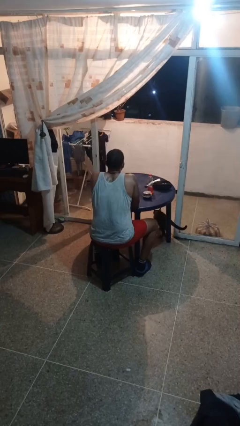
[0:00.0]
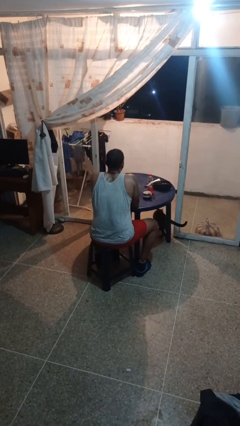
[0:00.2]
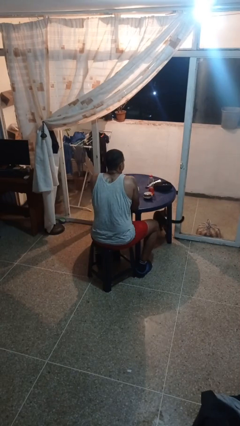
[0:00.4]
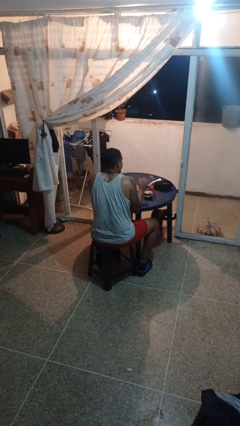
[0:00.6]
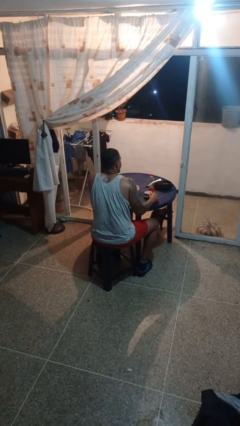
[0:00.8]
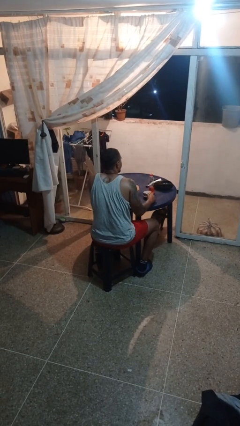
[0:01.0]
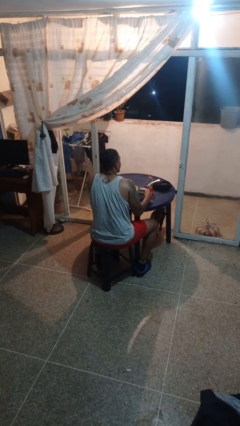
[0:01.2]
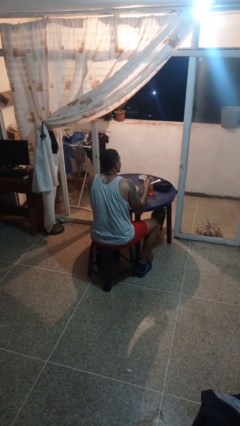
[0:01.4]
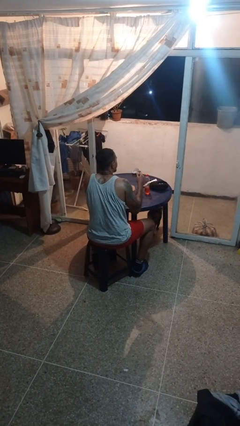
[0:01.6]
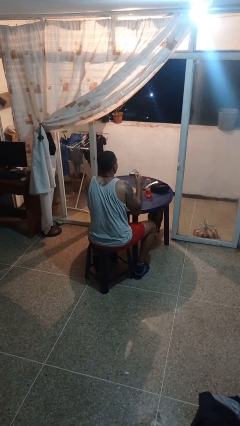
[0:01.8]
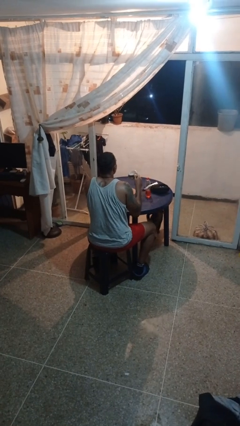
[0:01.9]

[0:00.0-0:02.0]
person picks up object from table

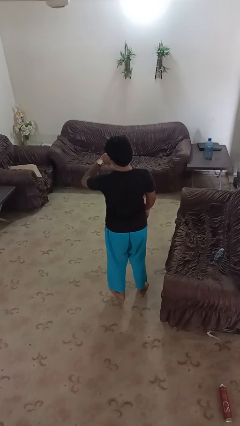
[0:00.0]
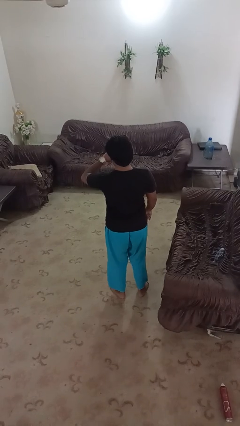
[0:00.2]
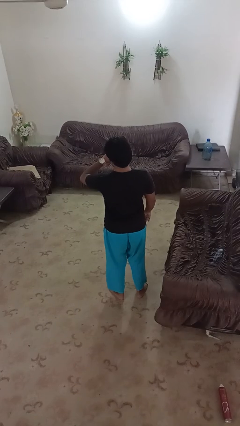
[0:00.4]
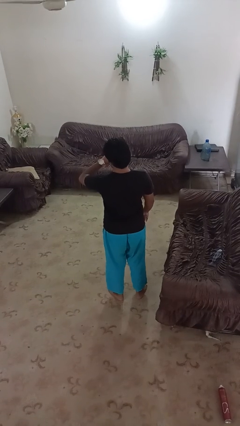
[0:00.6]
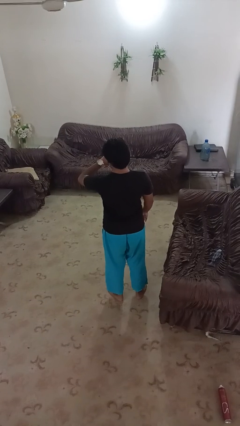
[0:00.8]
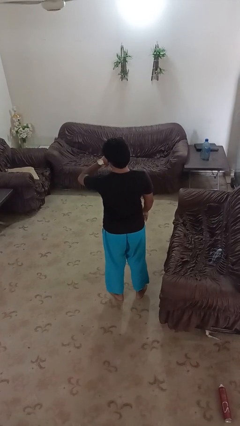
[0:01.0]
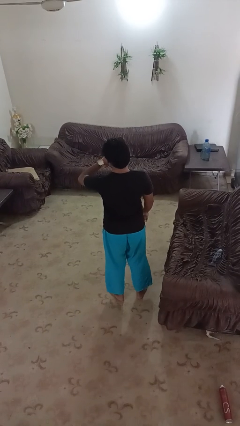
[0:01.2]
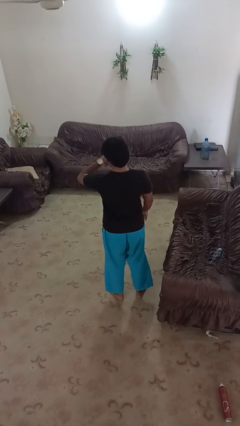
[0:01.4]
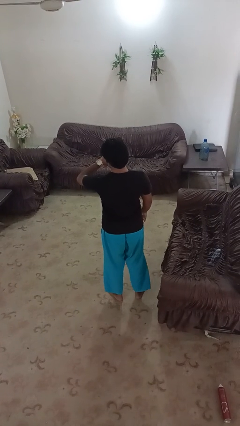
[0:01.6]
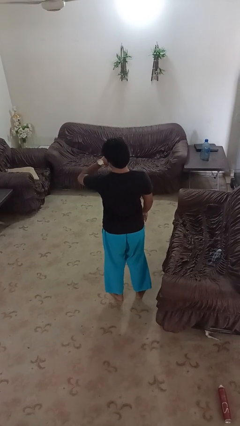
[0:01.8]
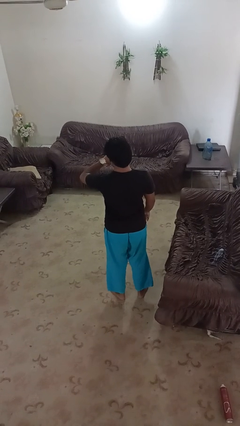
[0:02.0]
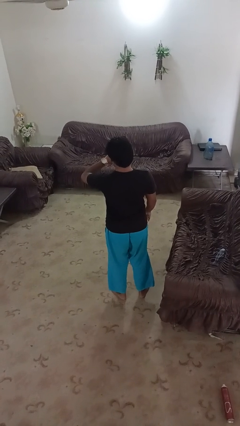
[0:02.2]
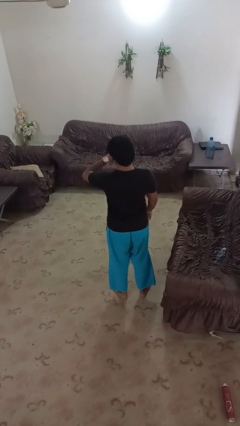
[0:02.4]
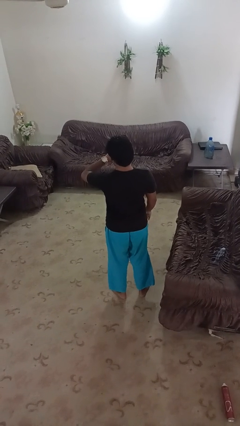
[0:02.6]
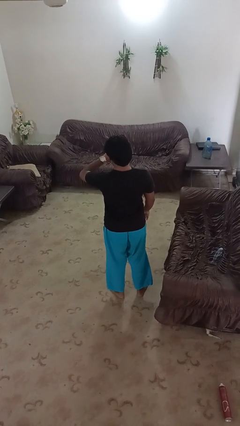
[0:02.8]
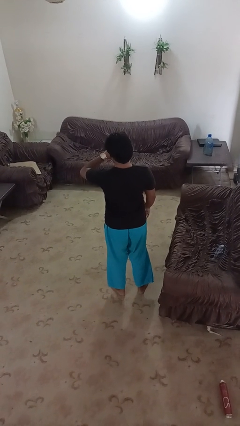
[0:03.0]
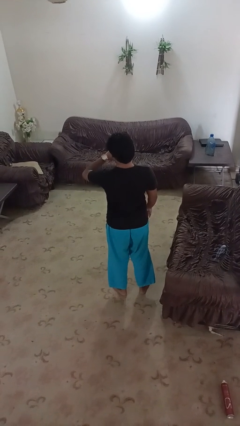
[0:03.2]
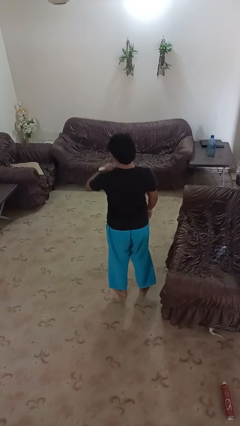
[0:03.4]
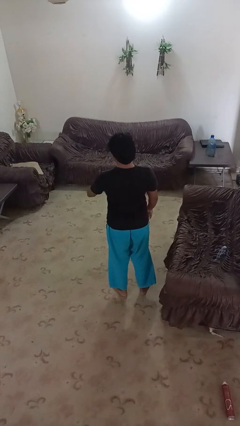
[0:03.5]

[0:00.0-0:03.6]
person looks at wristwatch

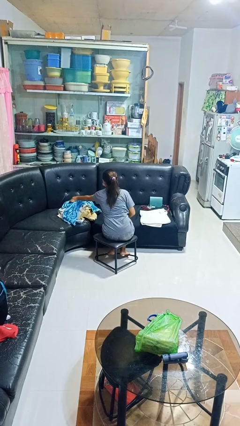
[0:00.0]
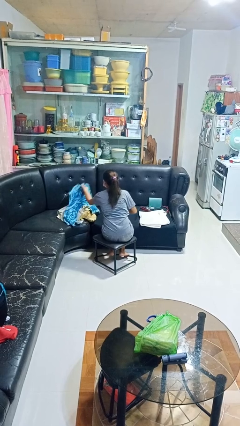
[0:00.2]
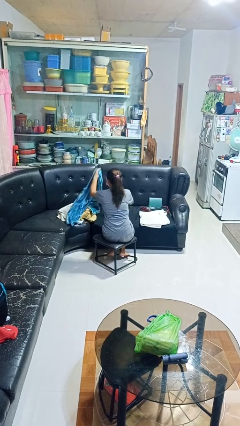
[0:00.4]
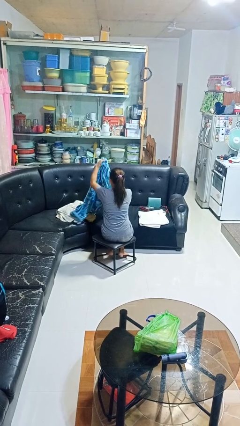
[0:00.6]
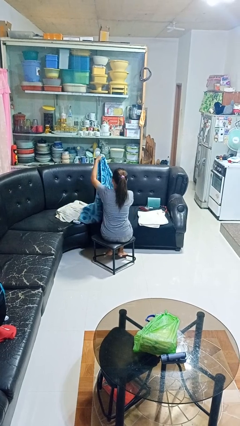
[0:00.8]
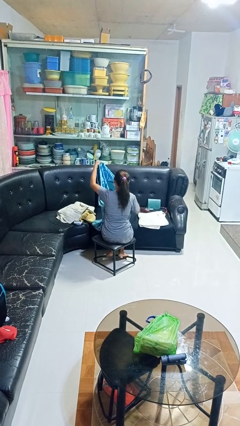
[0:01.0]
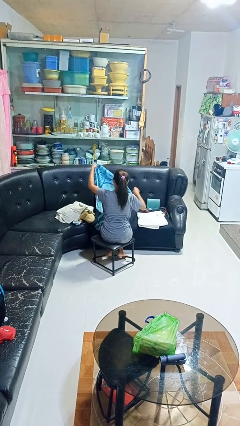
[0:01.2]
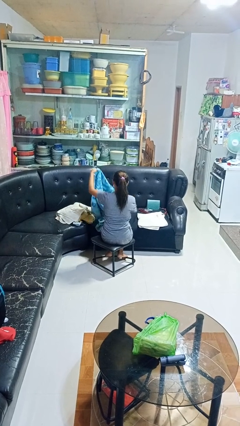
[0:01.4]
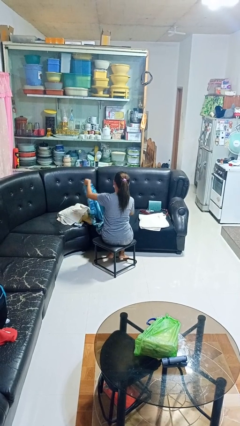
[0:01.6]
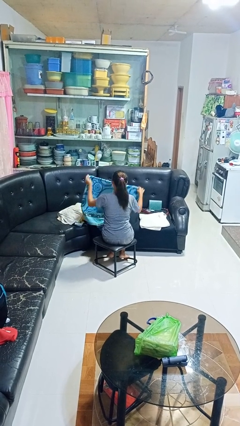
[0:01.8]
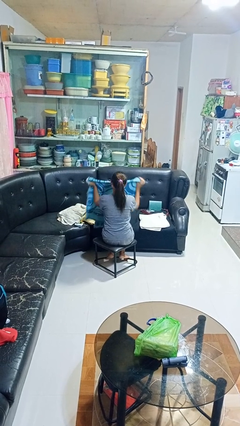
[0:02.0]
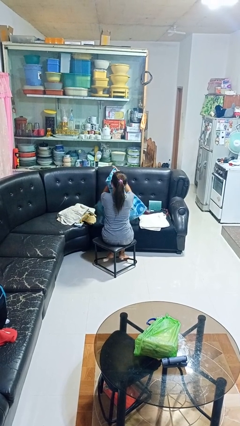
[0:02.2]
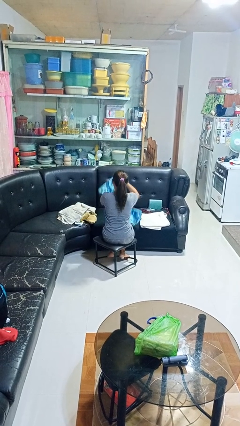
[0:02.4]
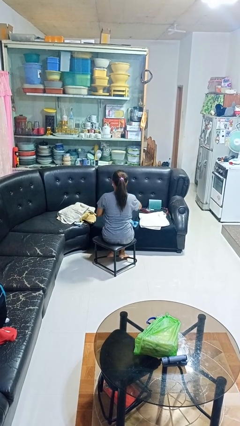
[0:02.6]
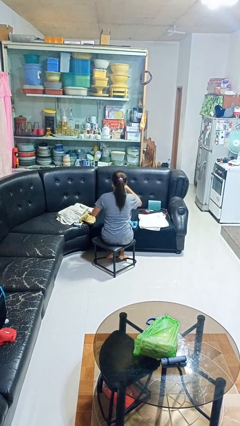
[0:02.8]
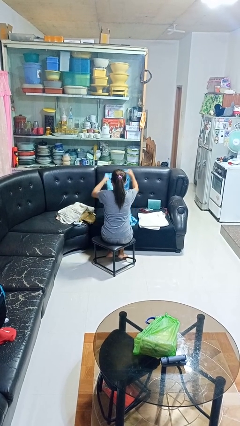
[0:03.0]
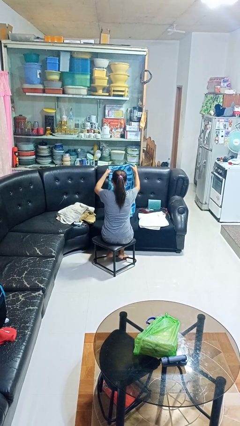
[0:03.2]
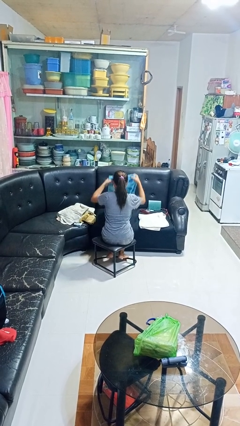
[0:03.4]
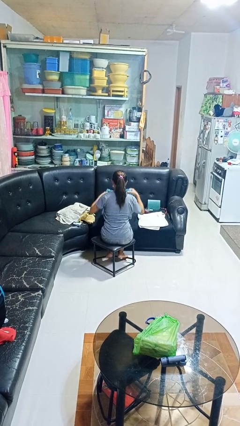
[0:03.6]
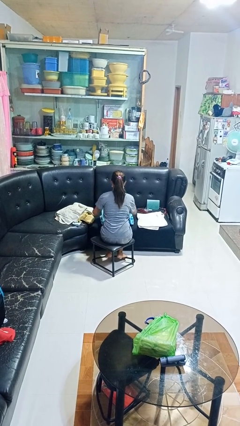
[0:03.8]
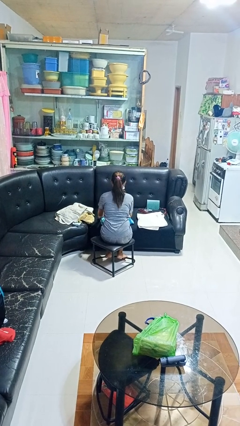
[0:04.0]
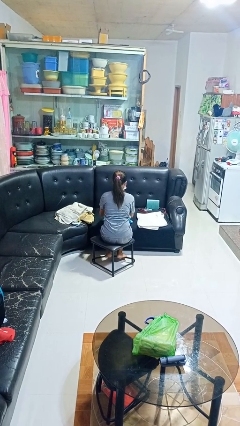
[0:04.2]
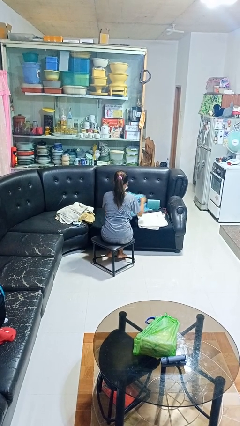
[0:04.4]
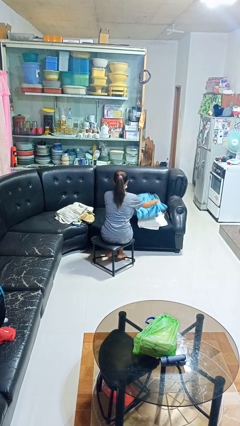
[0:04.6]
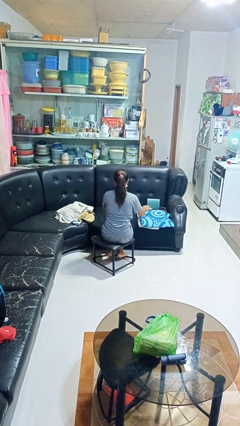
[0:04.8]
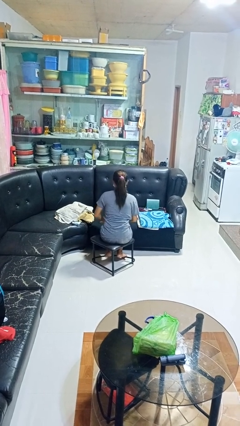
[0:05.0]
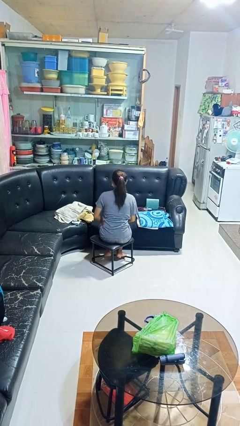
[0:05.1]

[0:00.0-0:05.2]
person folds towel

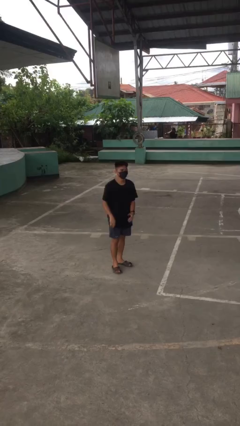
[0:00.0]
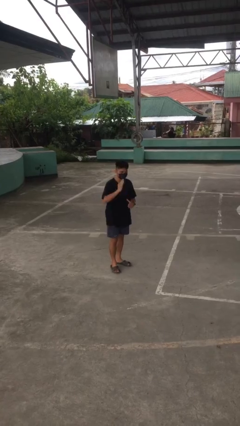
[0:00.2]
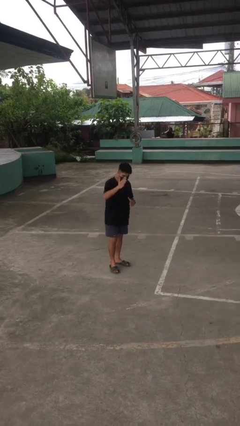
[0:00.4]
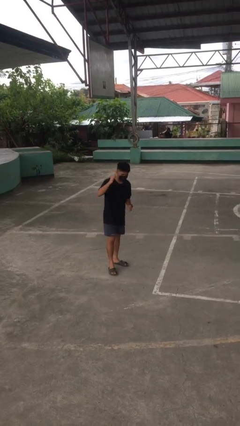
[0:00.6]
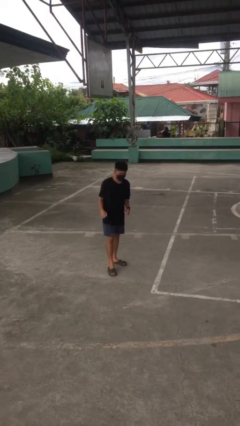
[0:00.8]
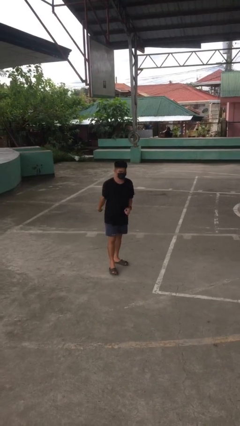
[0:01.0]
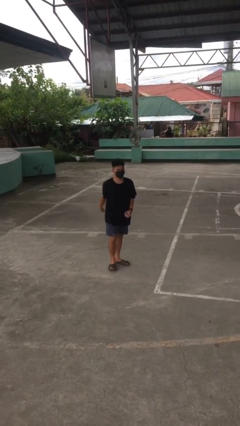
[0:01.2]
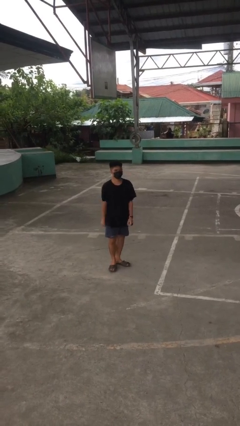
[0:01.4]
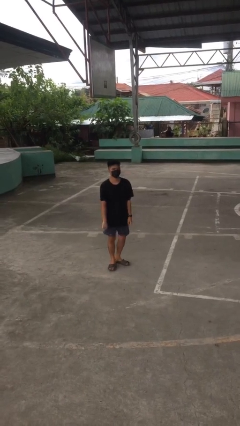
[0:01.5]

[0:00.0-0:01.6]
person karate chop

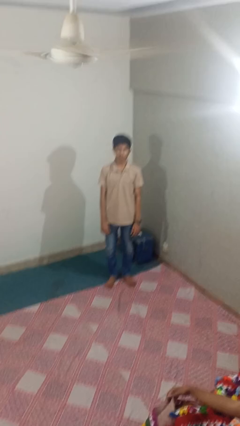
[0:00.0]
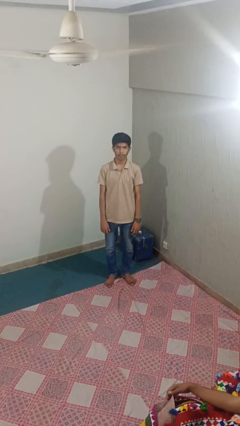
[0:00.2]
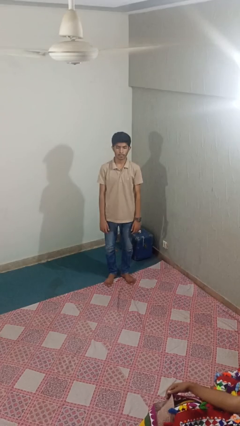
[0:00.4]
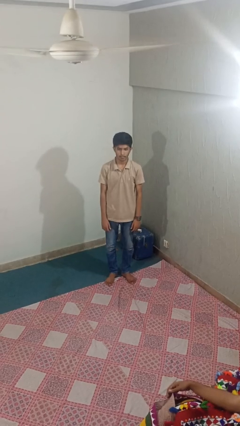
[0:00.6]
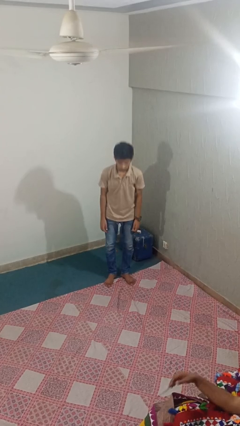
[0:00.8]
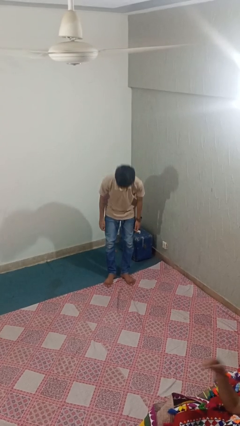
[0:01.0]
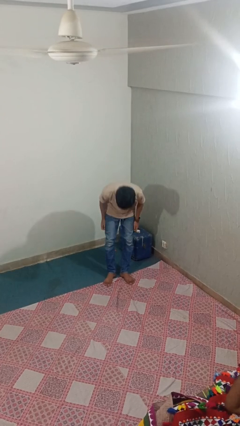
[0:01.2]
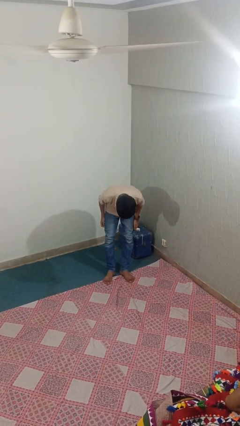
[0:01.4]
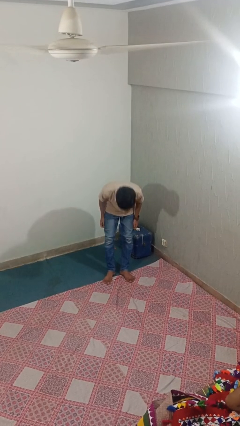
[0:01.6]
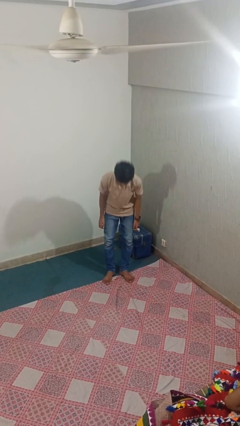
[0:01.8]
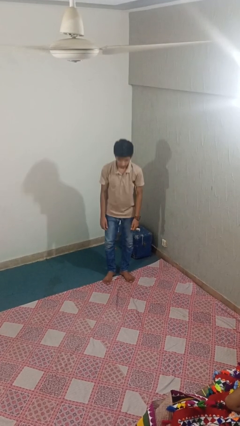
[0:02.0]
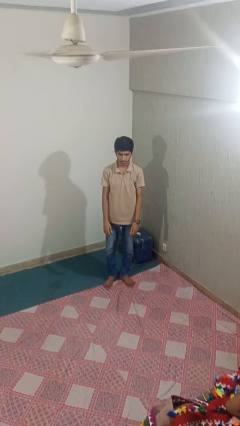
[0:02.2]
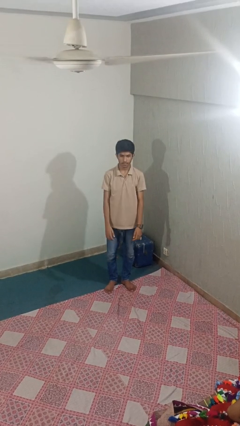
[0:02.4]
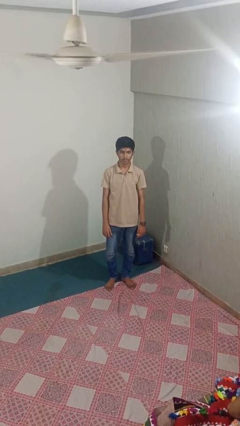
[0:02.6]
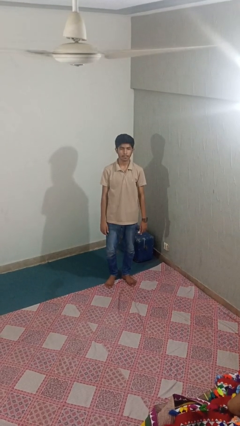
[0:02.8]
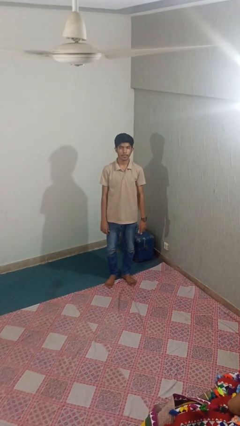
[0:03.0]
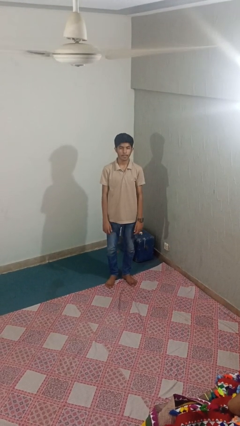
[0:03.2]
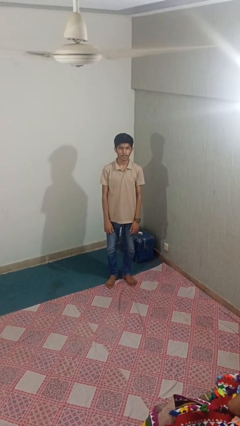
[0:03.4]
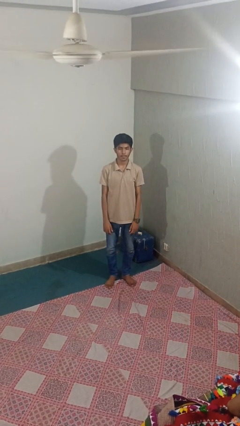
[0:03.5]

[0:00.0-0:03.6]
person bows

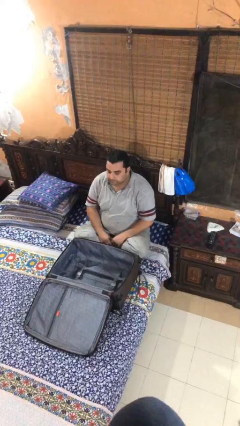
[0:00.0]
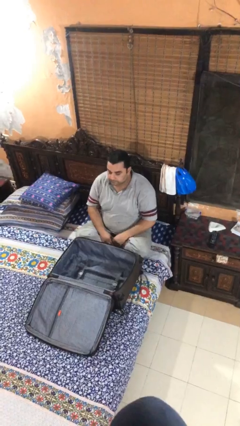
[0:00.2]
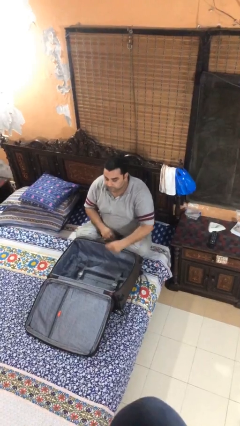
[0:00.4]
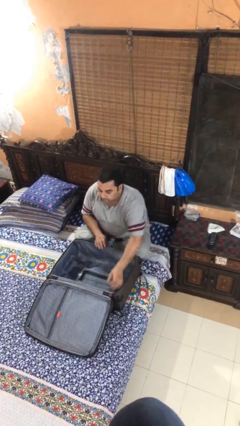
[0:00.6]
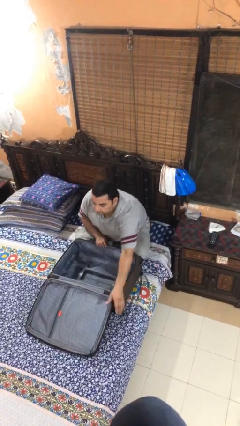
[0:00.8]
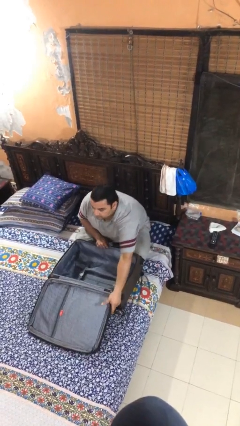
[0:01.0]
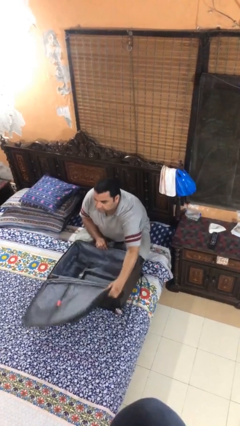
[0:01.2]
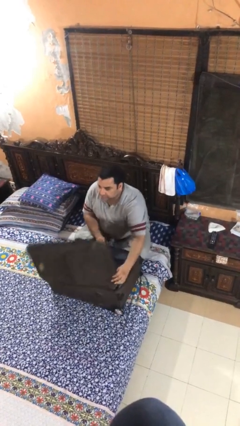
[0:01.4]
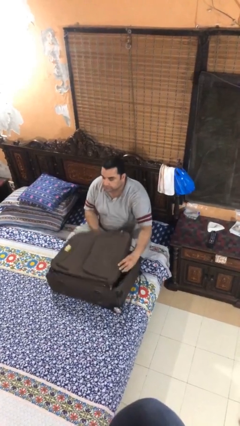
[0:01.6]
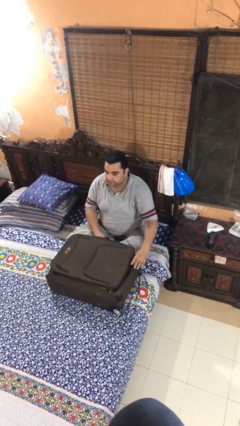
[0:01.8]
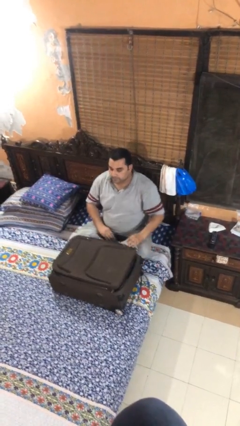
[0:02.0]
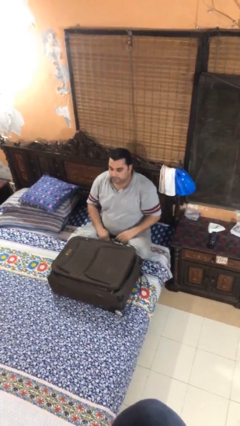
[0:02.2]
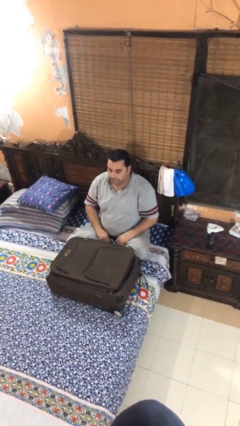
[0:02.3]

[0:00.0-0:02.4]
person closes suitcase
